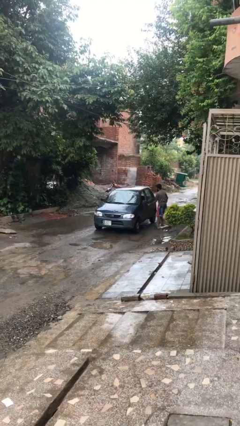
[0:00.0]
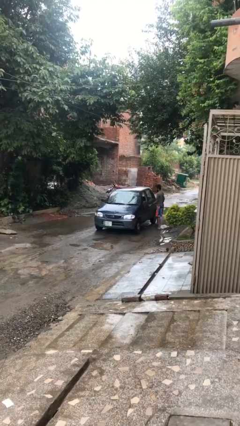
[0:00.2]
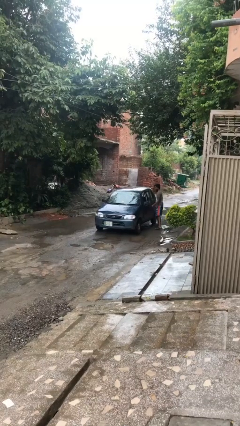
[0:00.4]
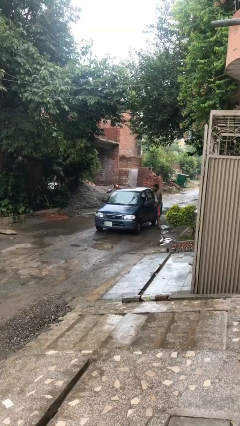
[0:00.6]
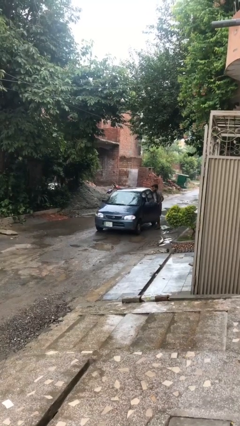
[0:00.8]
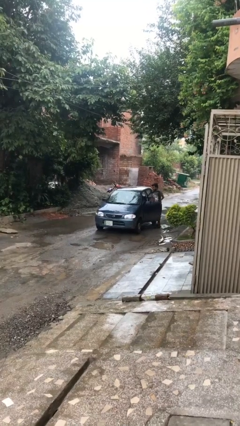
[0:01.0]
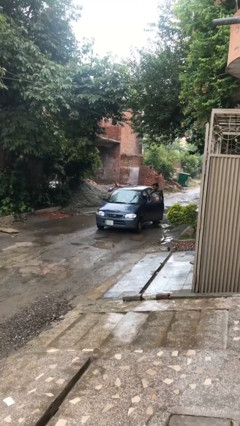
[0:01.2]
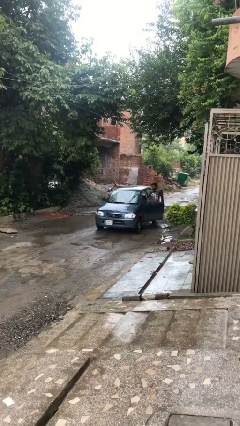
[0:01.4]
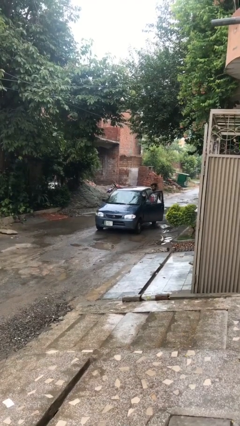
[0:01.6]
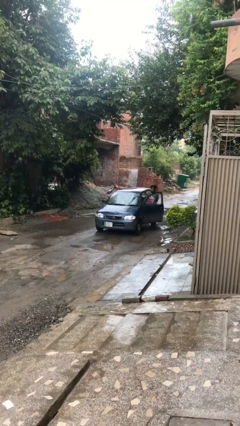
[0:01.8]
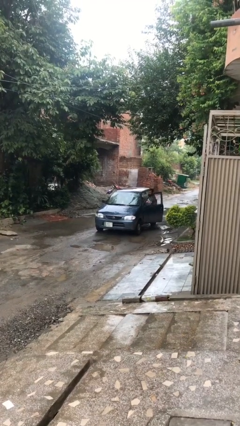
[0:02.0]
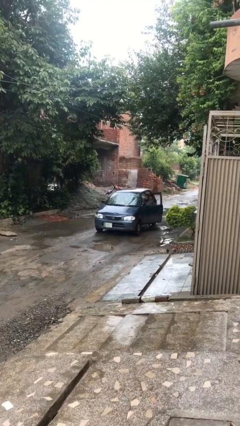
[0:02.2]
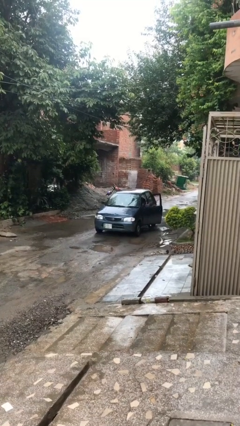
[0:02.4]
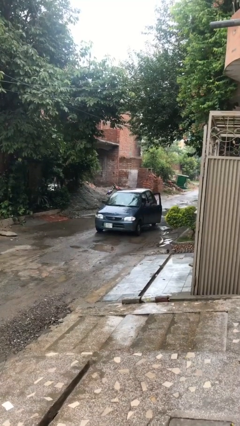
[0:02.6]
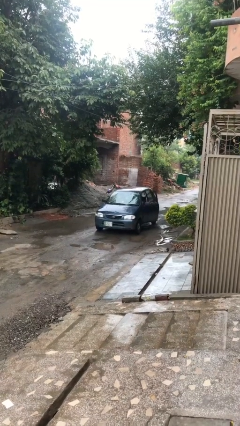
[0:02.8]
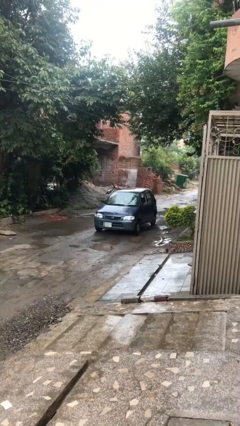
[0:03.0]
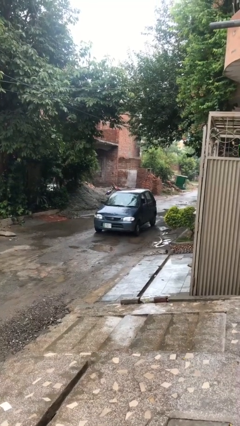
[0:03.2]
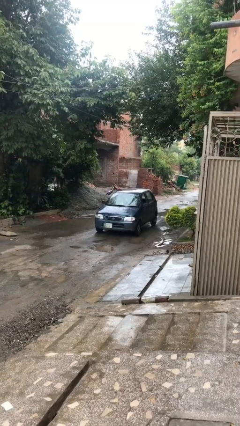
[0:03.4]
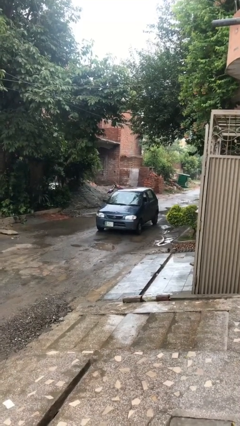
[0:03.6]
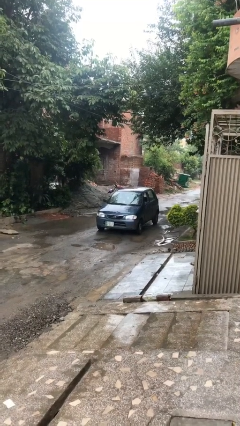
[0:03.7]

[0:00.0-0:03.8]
car picks up person

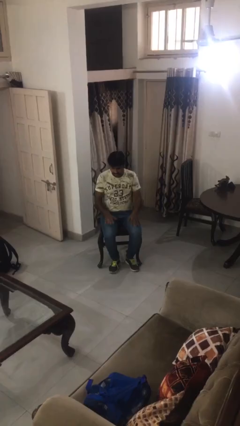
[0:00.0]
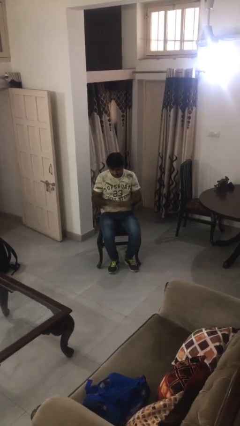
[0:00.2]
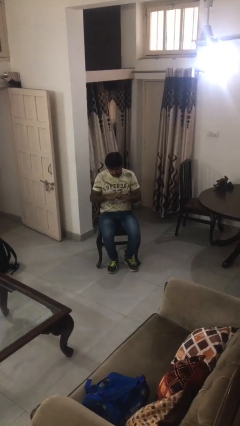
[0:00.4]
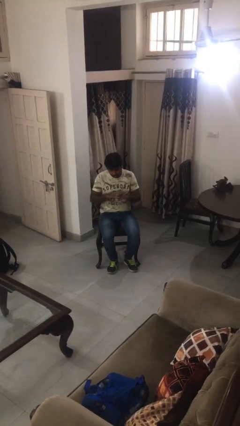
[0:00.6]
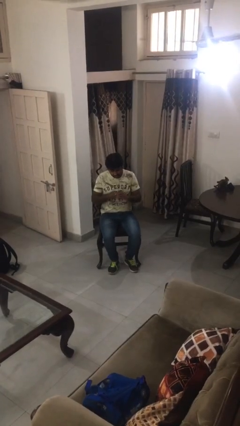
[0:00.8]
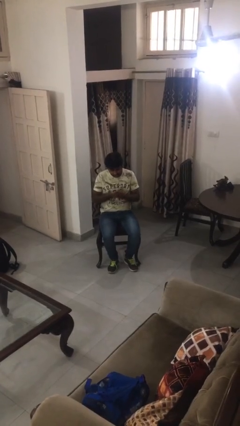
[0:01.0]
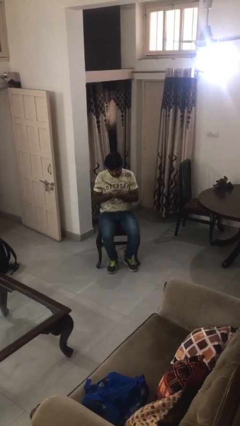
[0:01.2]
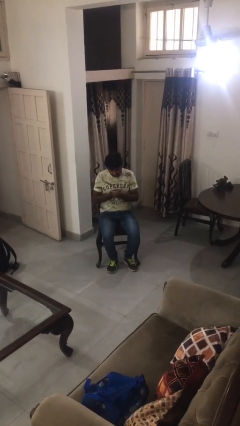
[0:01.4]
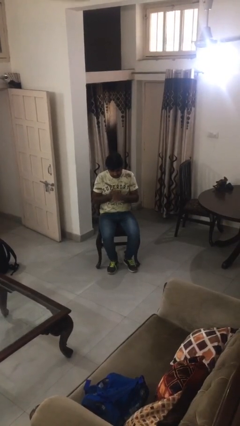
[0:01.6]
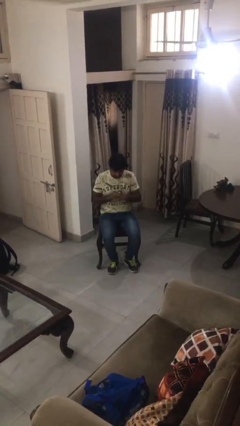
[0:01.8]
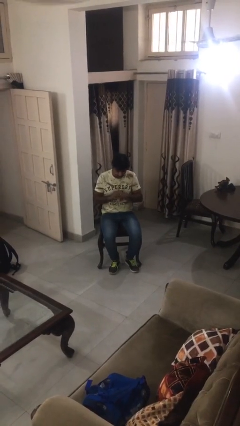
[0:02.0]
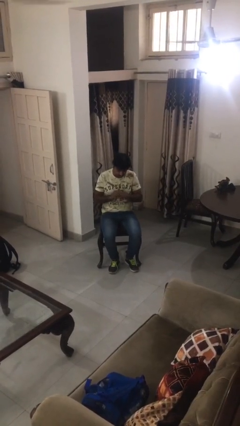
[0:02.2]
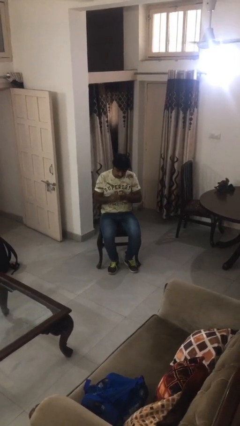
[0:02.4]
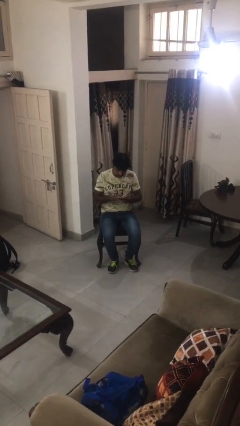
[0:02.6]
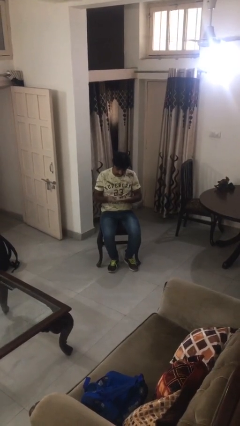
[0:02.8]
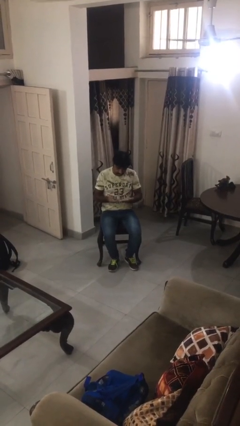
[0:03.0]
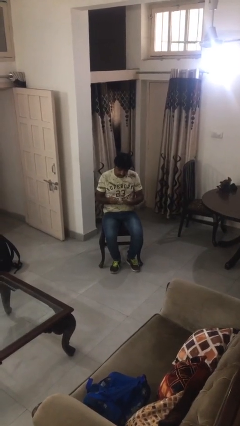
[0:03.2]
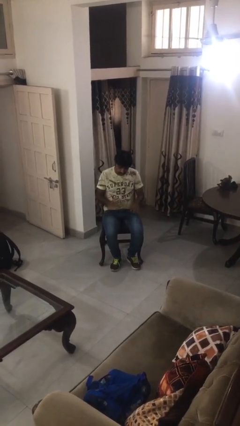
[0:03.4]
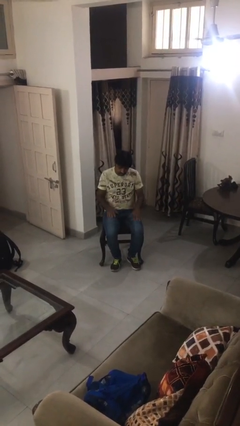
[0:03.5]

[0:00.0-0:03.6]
person looks at hands in lap

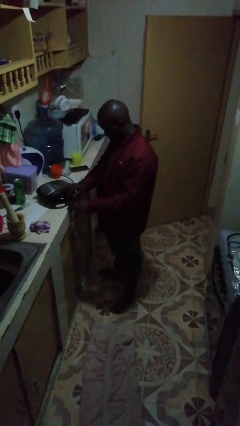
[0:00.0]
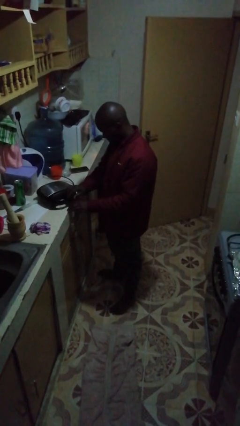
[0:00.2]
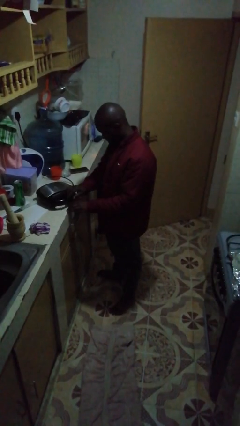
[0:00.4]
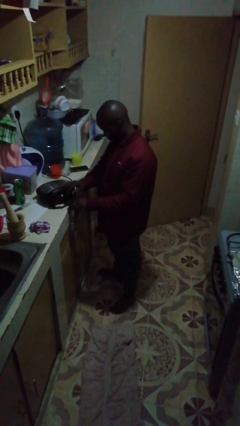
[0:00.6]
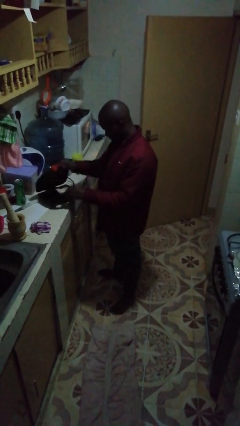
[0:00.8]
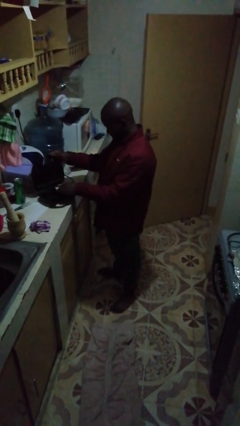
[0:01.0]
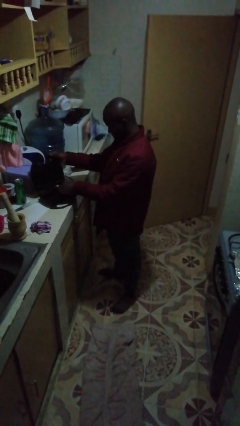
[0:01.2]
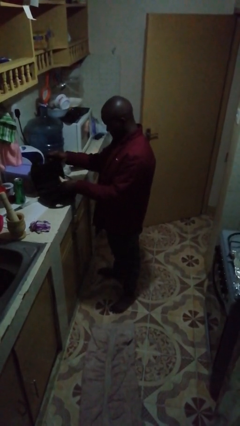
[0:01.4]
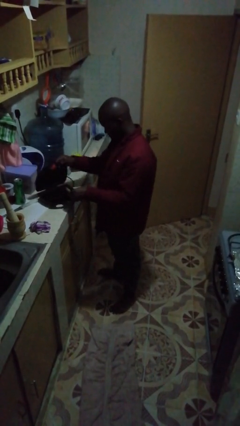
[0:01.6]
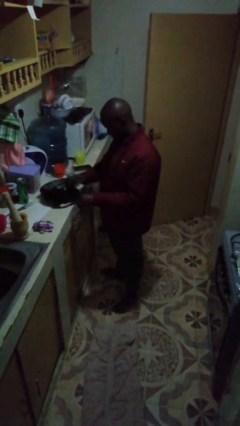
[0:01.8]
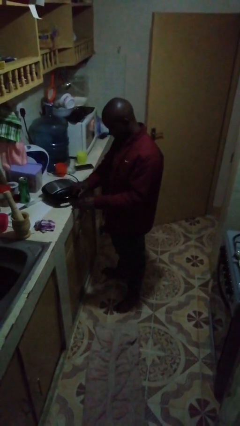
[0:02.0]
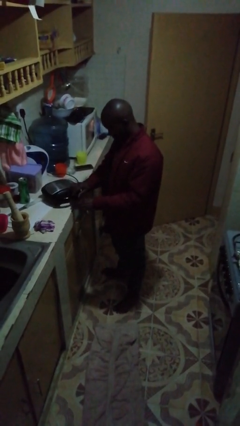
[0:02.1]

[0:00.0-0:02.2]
person takes object from toaster

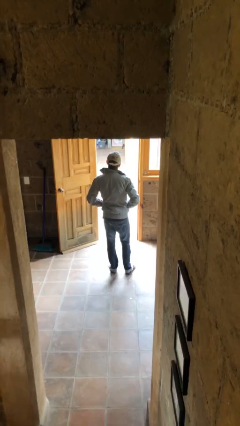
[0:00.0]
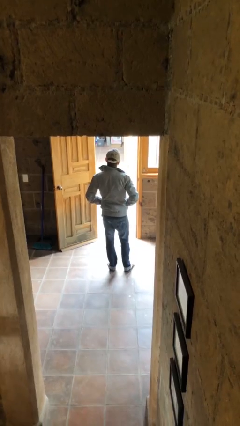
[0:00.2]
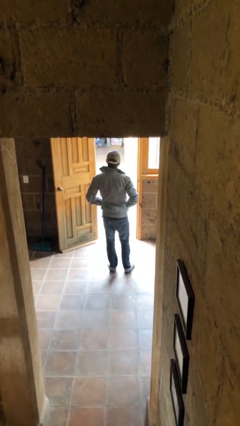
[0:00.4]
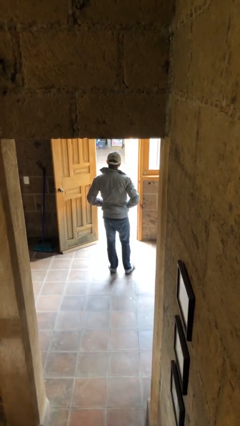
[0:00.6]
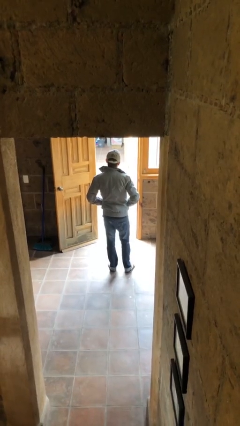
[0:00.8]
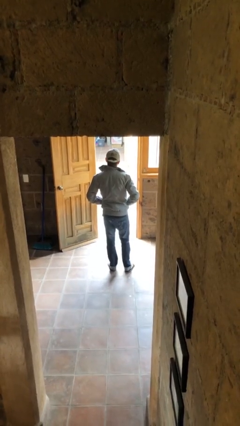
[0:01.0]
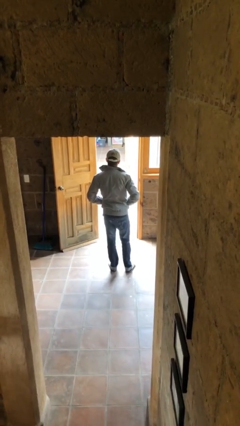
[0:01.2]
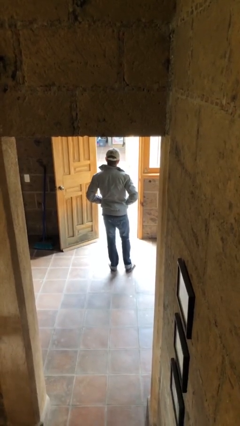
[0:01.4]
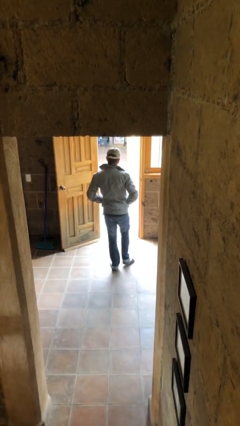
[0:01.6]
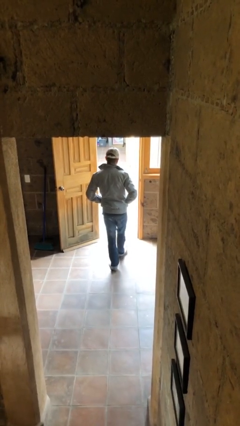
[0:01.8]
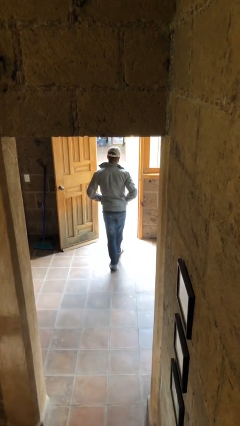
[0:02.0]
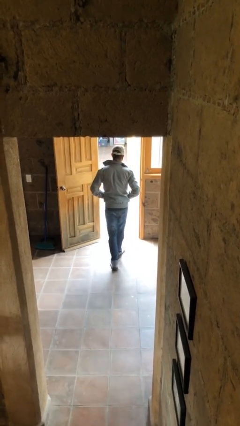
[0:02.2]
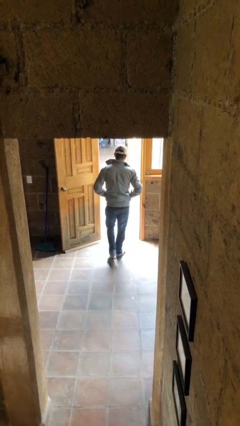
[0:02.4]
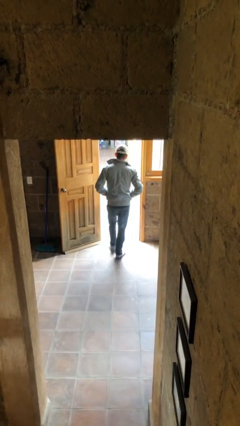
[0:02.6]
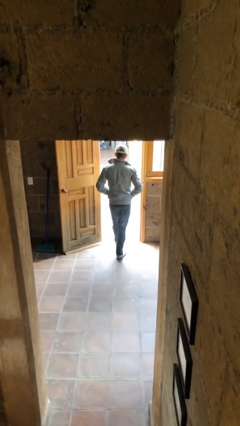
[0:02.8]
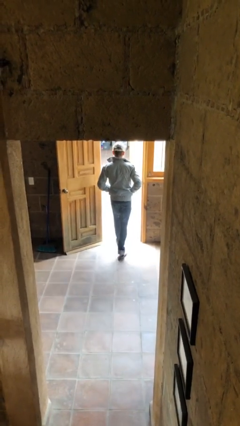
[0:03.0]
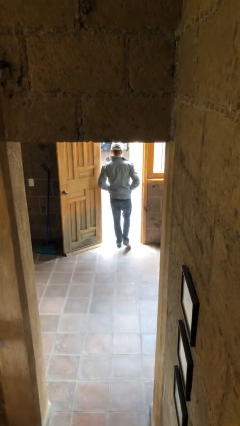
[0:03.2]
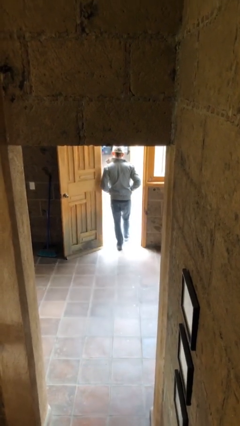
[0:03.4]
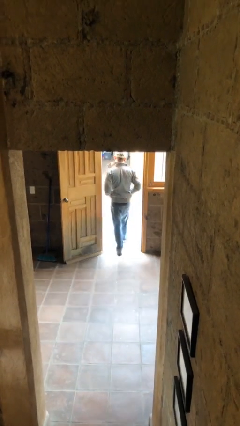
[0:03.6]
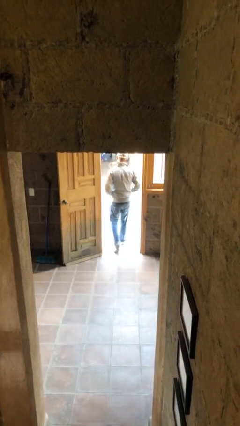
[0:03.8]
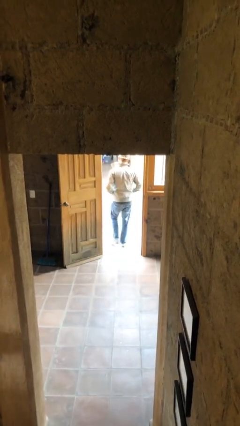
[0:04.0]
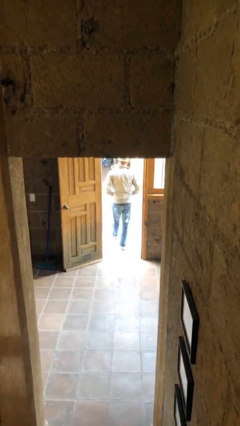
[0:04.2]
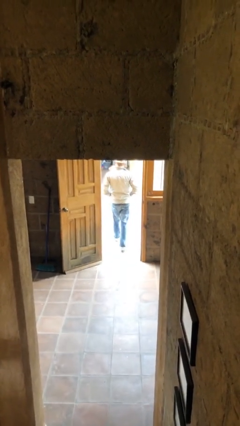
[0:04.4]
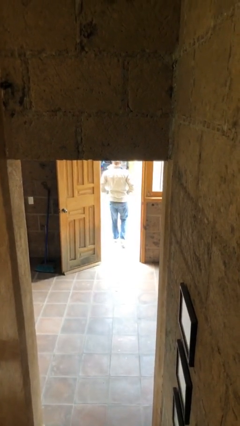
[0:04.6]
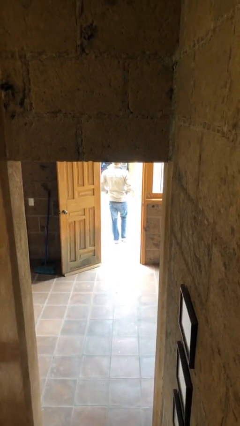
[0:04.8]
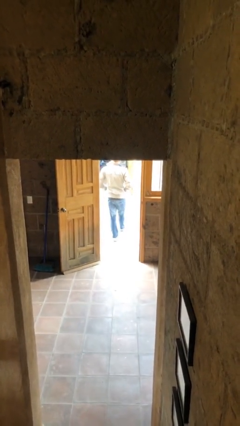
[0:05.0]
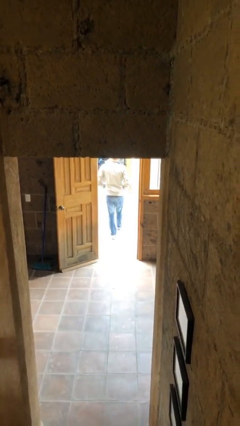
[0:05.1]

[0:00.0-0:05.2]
person exits scene through structure

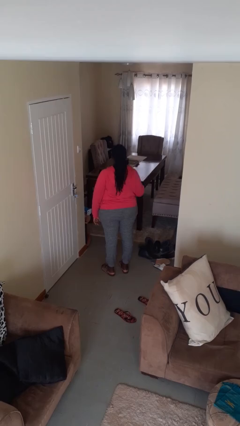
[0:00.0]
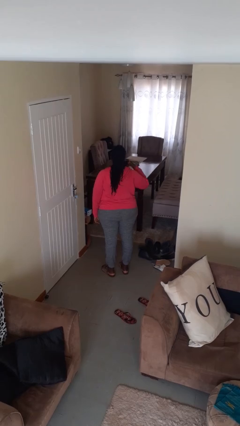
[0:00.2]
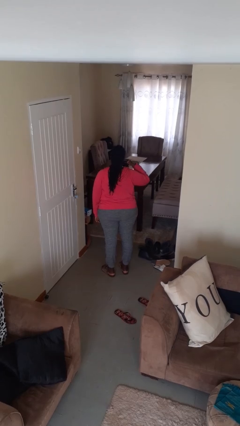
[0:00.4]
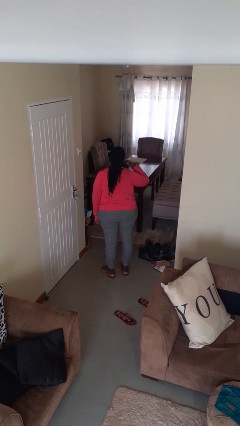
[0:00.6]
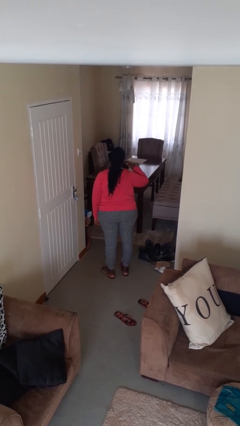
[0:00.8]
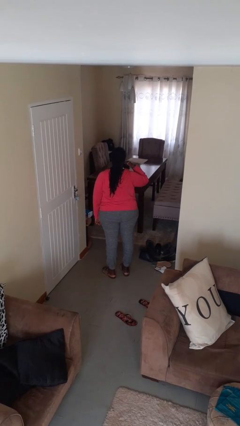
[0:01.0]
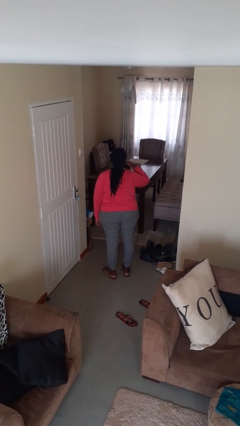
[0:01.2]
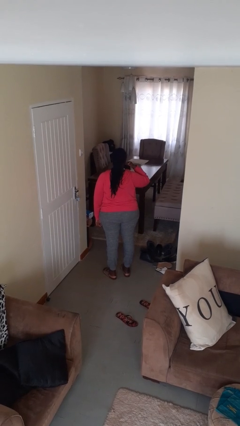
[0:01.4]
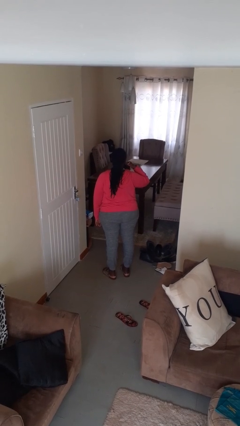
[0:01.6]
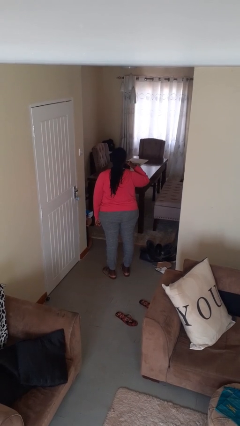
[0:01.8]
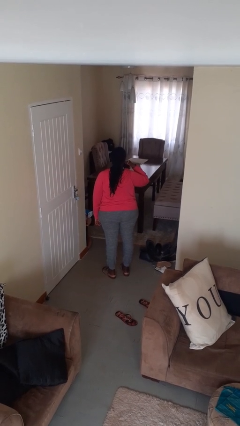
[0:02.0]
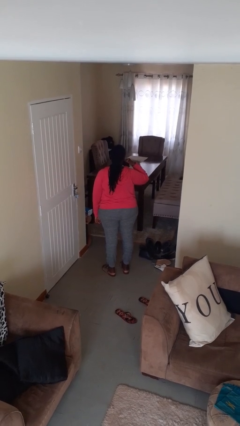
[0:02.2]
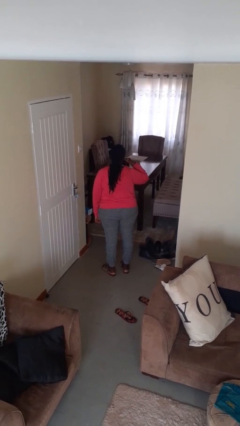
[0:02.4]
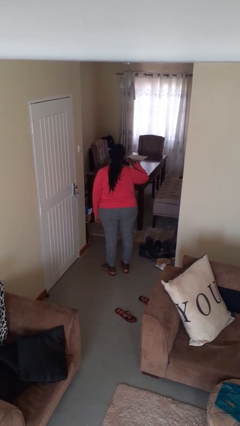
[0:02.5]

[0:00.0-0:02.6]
person gestures call me

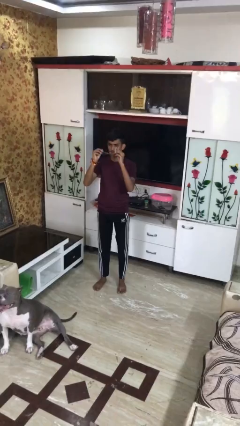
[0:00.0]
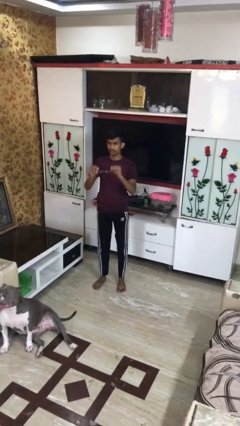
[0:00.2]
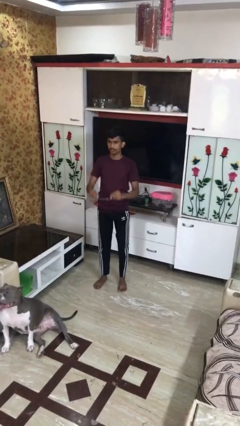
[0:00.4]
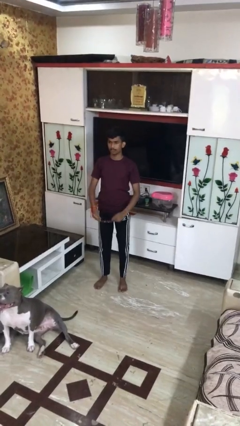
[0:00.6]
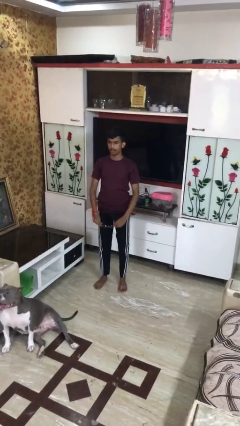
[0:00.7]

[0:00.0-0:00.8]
person takes off glasses
